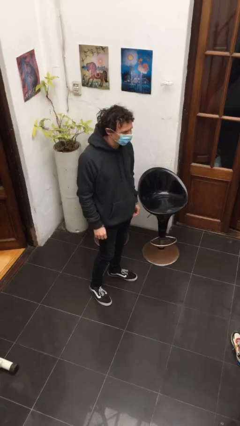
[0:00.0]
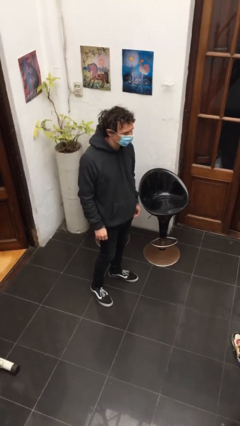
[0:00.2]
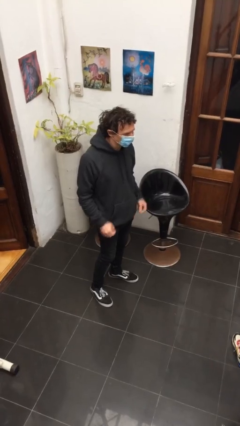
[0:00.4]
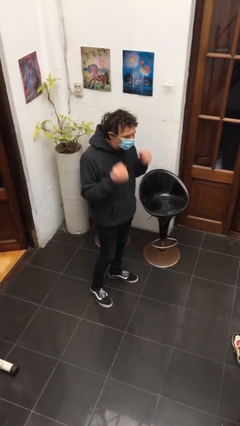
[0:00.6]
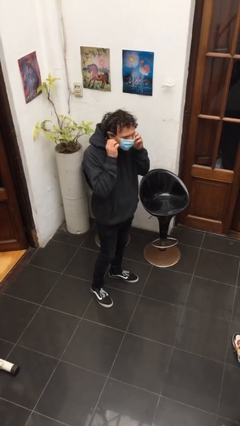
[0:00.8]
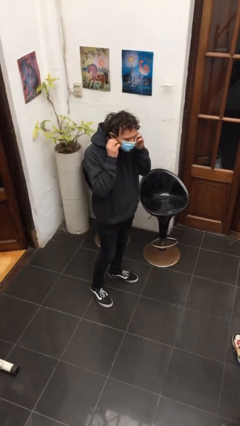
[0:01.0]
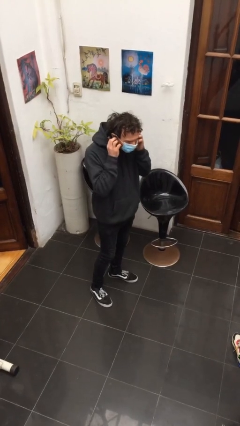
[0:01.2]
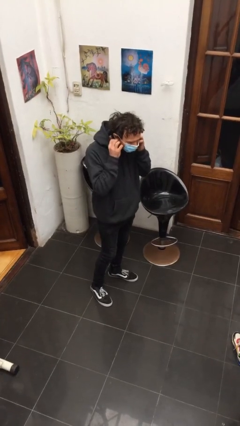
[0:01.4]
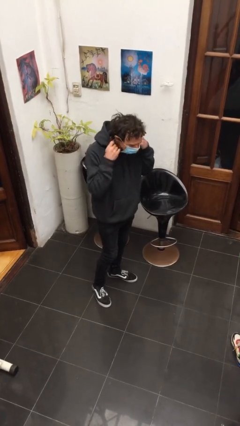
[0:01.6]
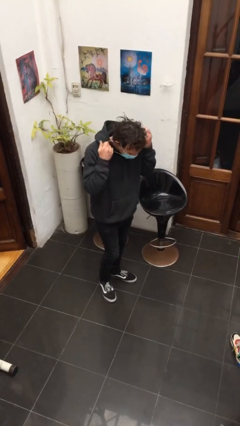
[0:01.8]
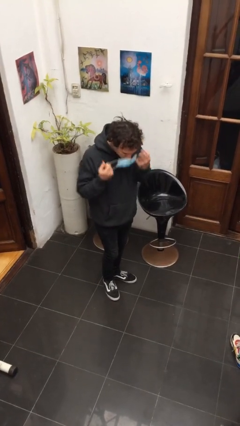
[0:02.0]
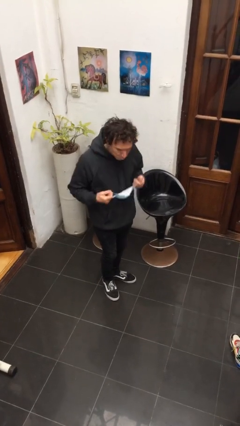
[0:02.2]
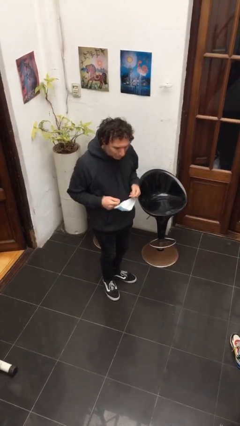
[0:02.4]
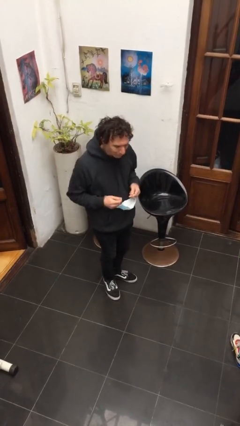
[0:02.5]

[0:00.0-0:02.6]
person takes off facemask

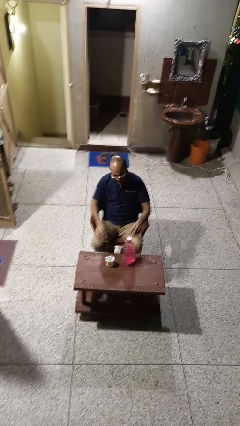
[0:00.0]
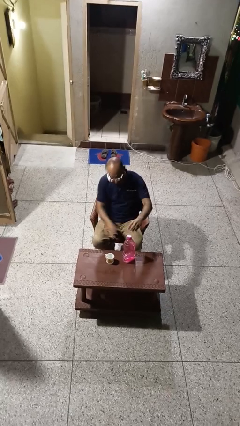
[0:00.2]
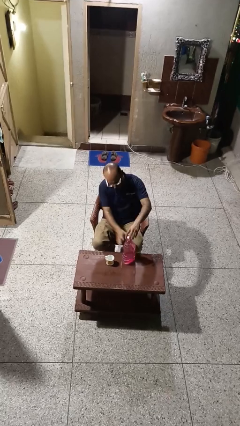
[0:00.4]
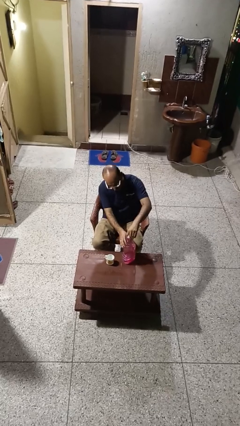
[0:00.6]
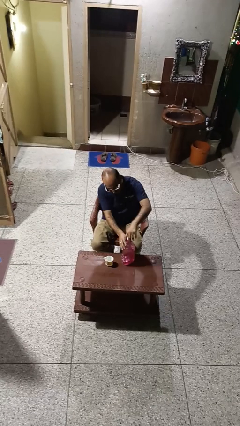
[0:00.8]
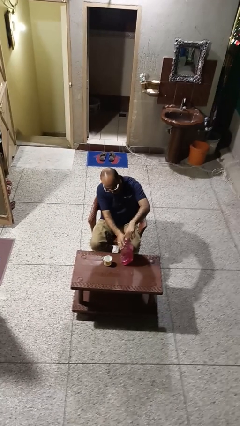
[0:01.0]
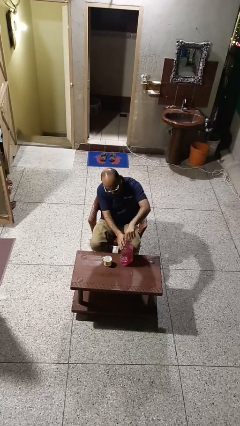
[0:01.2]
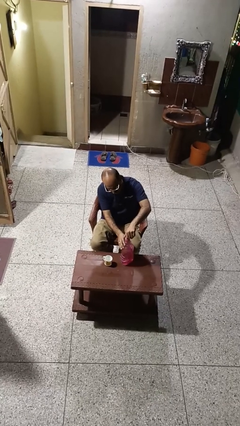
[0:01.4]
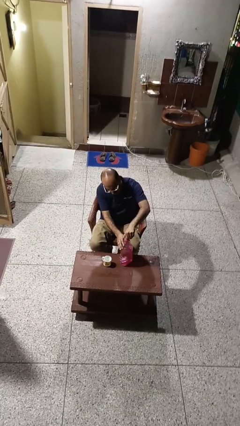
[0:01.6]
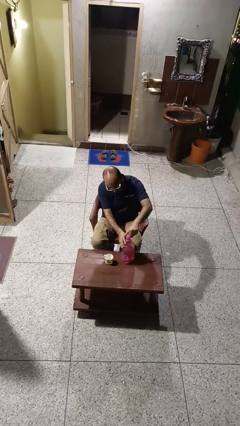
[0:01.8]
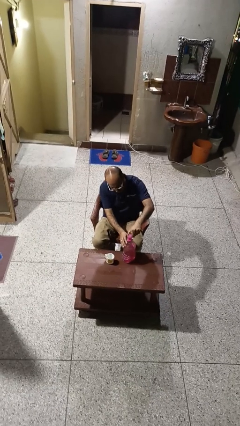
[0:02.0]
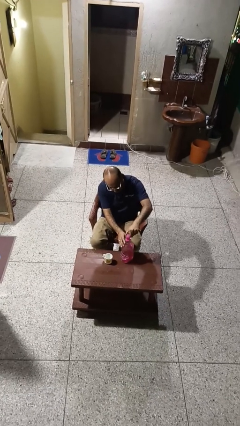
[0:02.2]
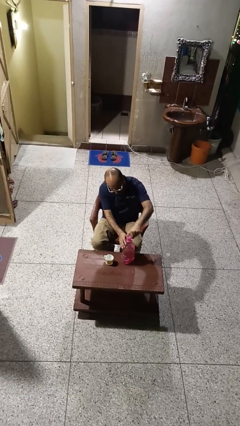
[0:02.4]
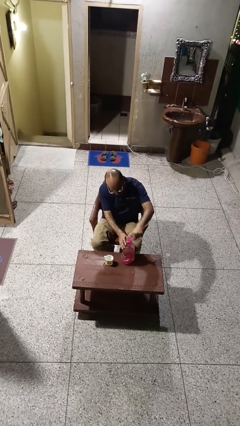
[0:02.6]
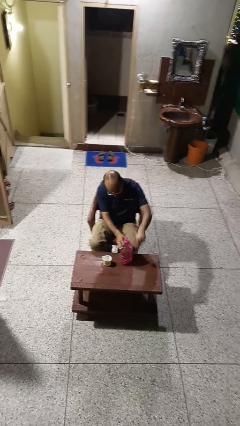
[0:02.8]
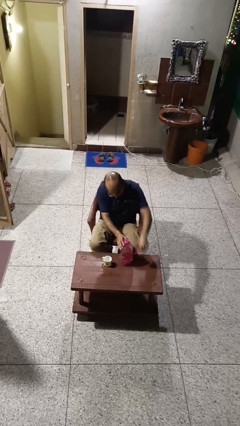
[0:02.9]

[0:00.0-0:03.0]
person unscrews lid from bottle

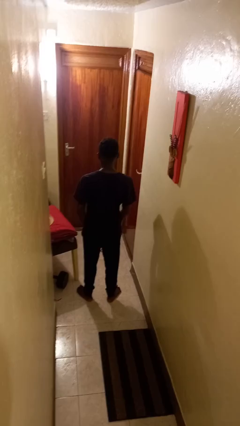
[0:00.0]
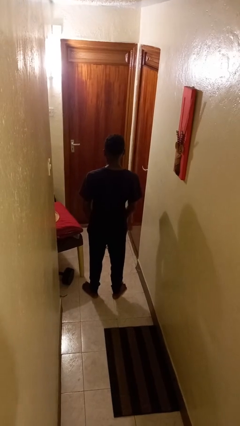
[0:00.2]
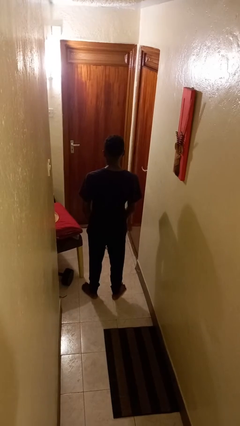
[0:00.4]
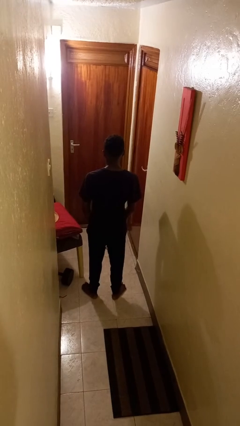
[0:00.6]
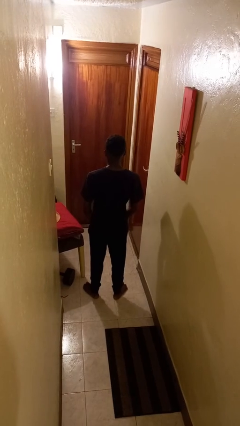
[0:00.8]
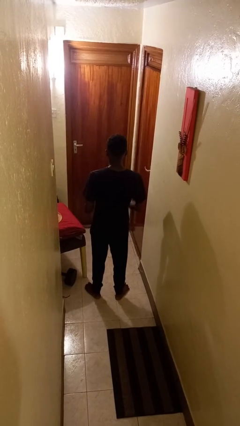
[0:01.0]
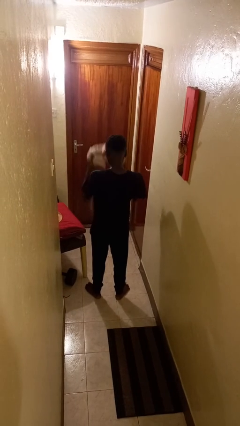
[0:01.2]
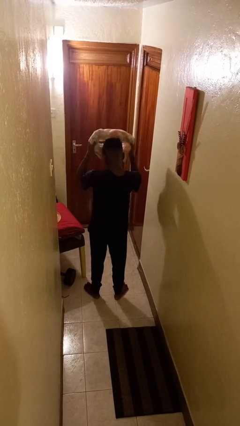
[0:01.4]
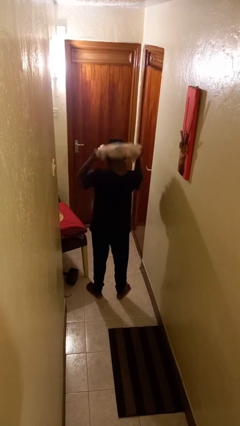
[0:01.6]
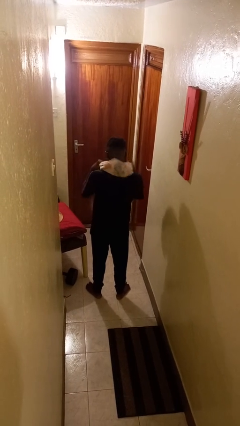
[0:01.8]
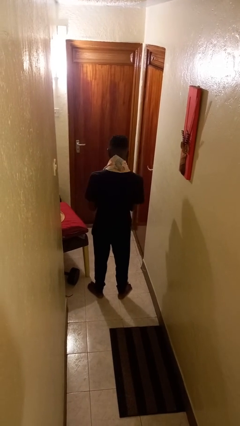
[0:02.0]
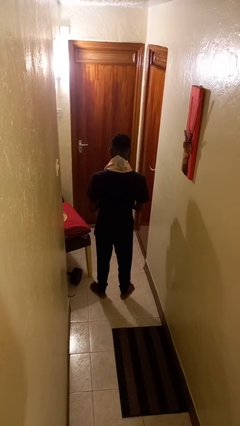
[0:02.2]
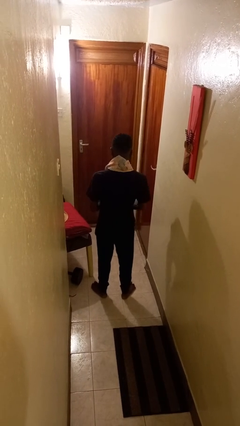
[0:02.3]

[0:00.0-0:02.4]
person puts on scarf

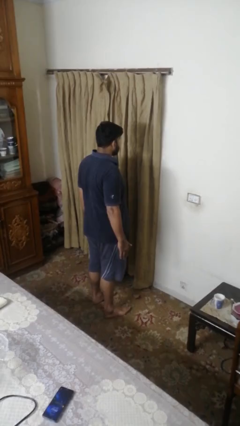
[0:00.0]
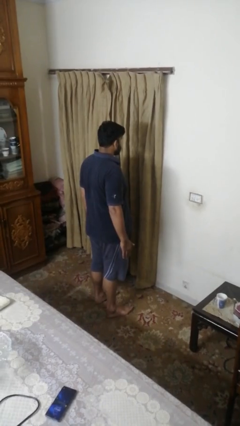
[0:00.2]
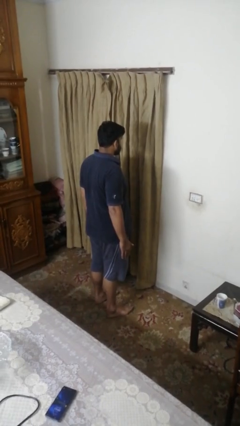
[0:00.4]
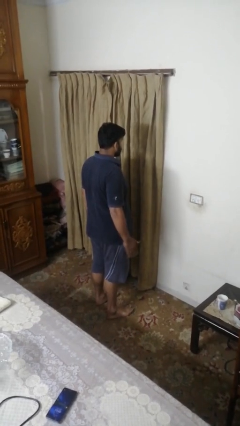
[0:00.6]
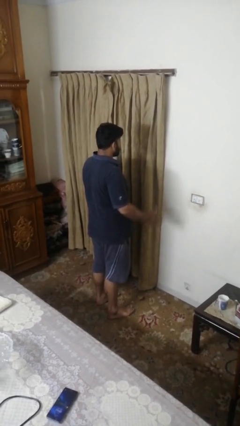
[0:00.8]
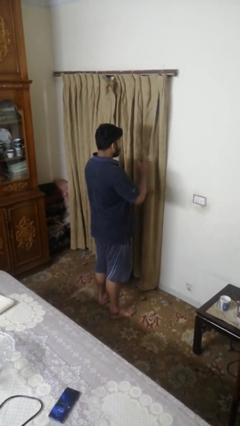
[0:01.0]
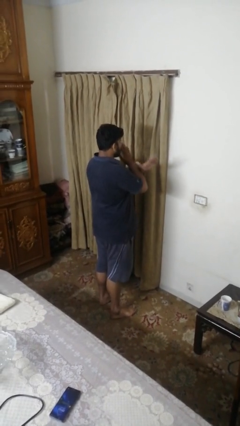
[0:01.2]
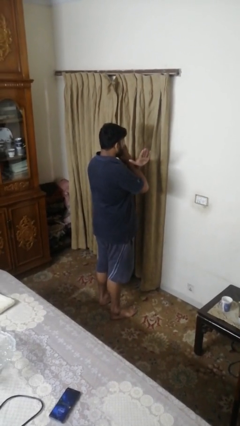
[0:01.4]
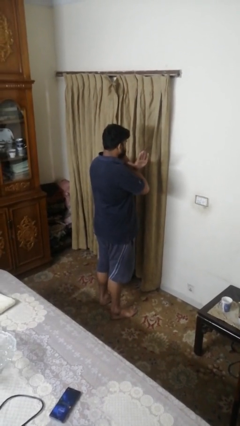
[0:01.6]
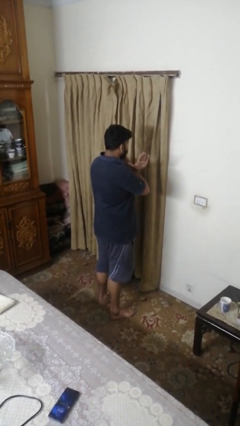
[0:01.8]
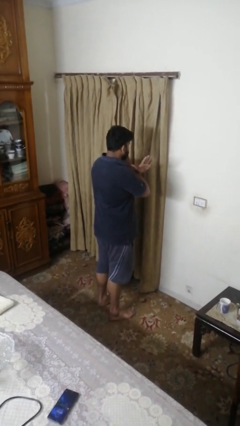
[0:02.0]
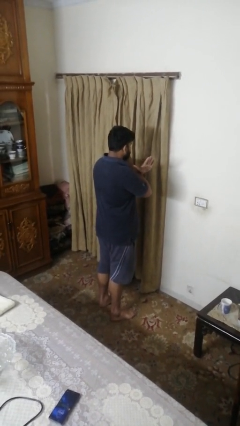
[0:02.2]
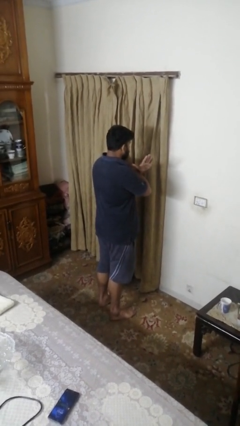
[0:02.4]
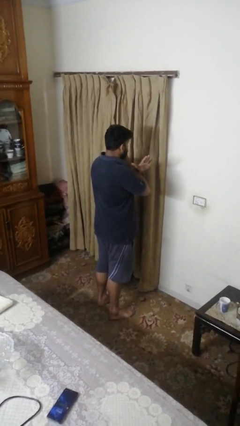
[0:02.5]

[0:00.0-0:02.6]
person gestures arms x

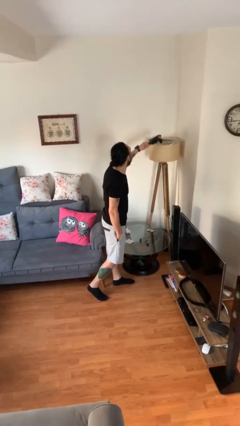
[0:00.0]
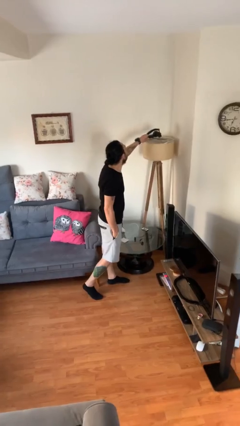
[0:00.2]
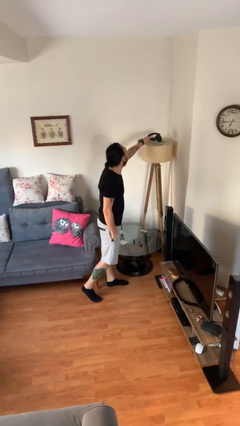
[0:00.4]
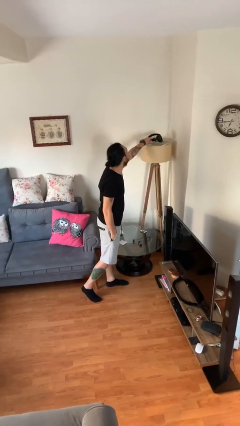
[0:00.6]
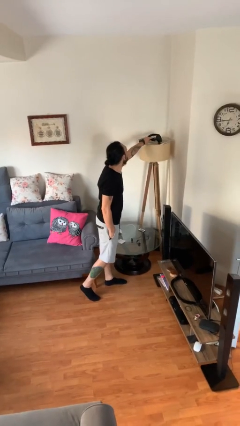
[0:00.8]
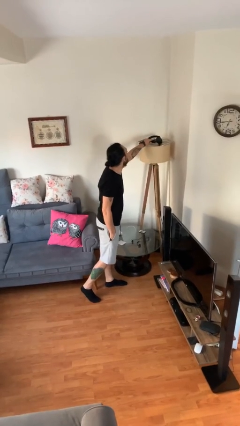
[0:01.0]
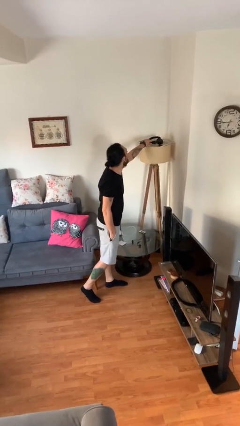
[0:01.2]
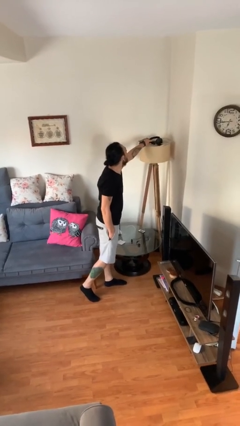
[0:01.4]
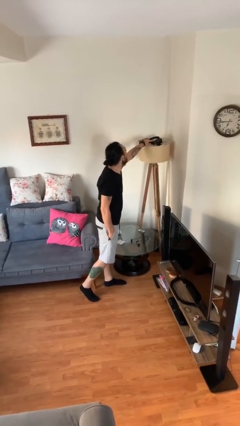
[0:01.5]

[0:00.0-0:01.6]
person puts down object on shelf

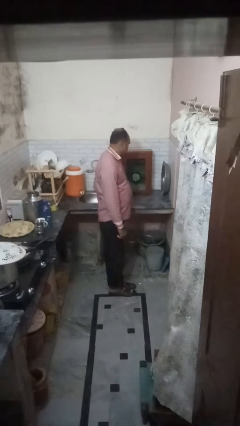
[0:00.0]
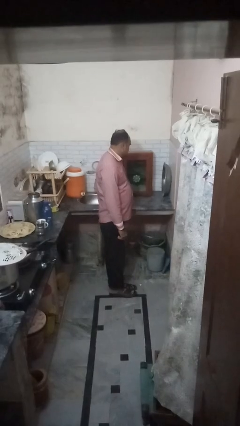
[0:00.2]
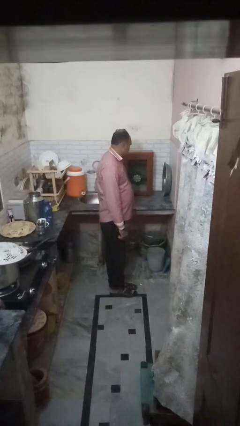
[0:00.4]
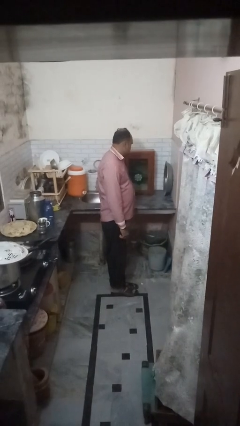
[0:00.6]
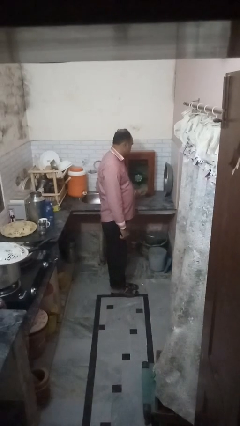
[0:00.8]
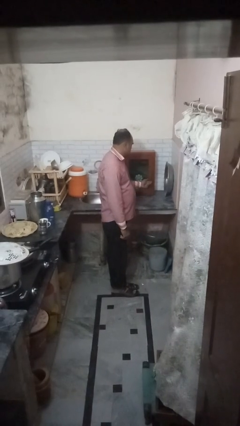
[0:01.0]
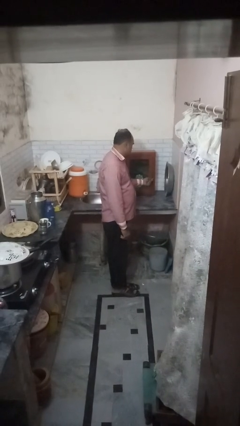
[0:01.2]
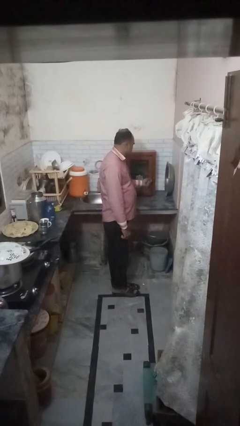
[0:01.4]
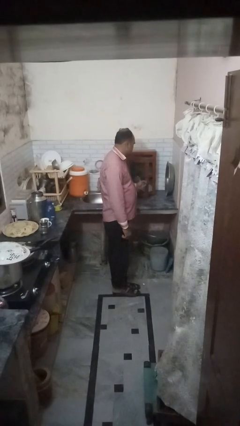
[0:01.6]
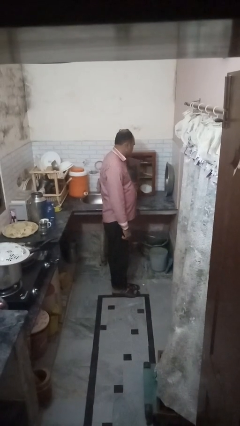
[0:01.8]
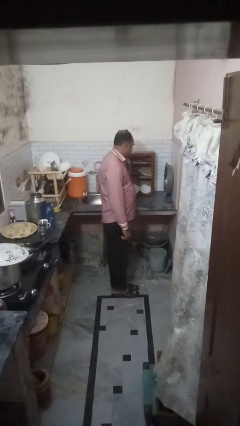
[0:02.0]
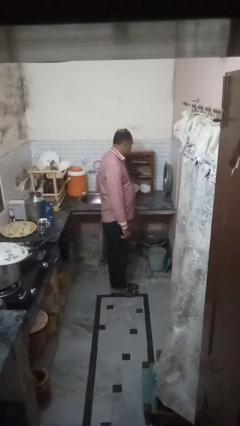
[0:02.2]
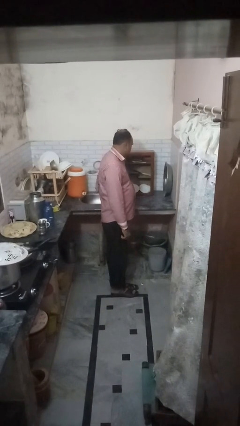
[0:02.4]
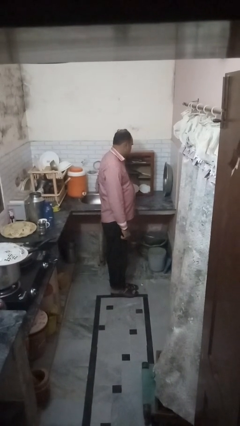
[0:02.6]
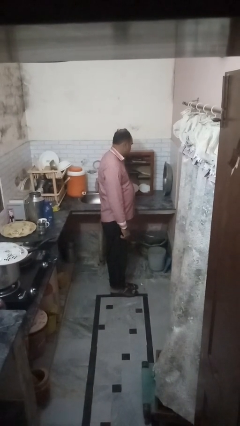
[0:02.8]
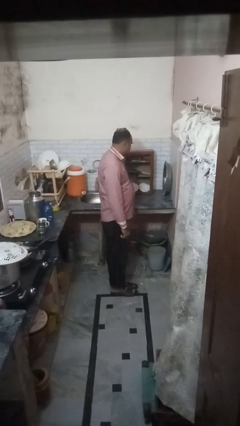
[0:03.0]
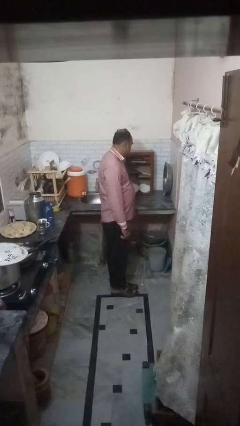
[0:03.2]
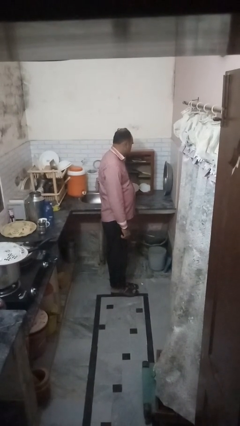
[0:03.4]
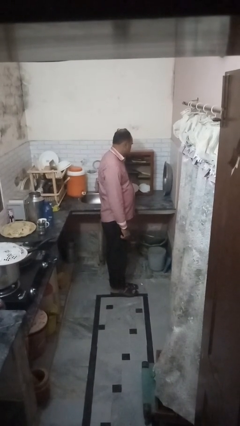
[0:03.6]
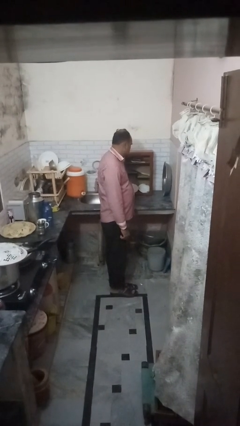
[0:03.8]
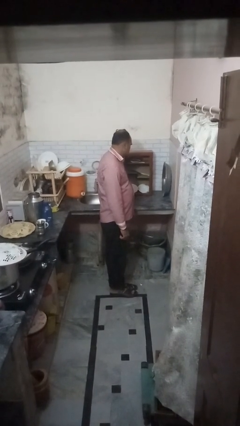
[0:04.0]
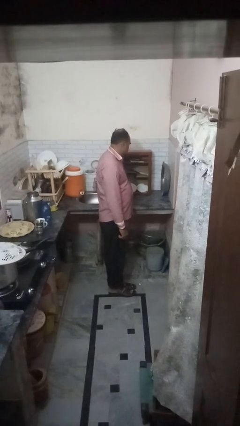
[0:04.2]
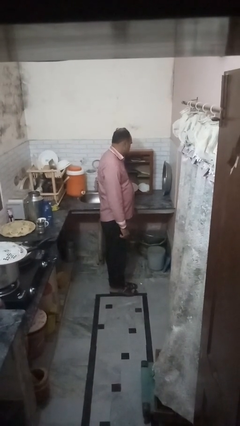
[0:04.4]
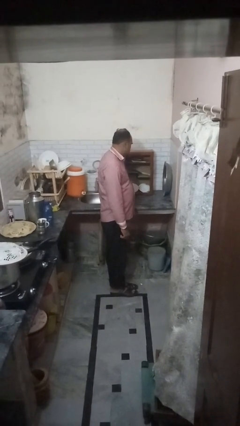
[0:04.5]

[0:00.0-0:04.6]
person opens cabinet

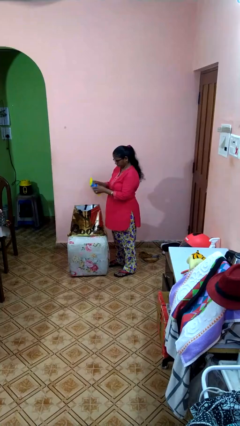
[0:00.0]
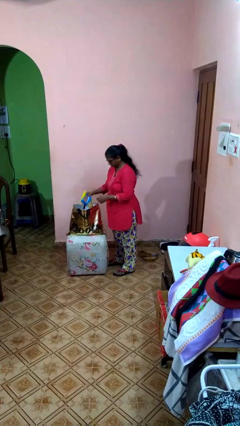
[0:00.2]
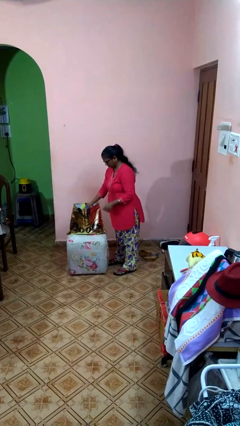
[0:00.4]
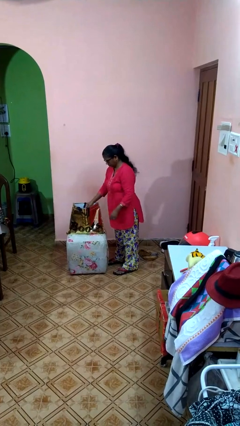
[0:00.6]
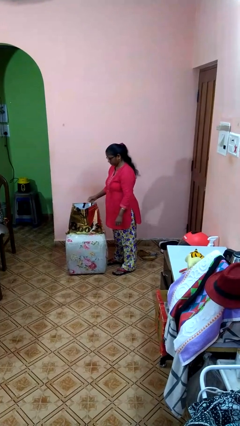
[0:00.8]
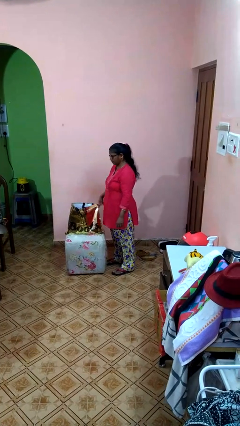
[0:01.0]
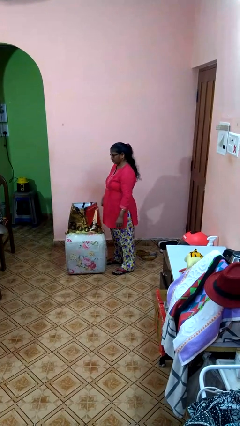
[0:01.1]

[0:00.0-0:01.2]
person puts object into bag
